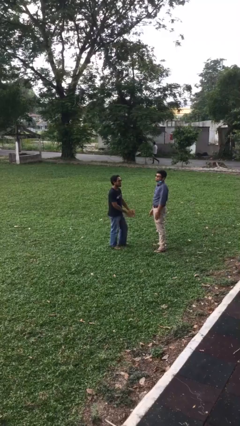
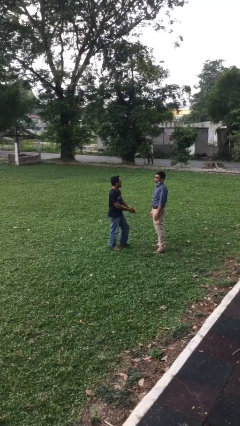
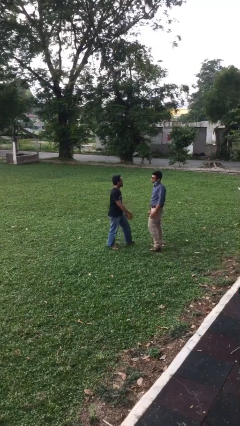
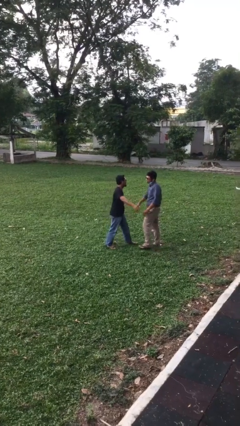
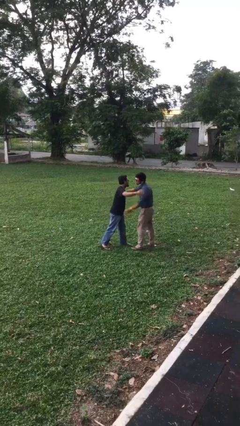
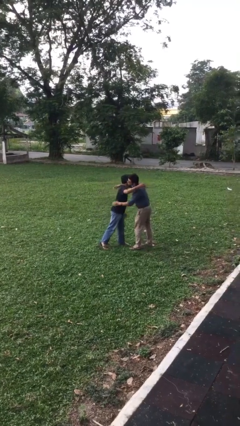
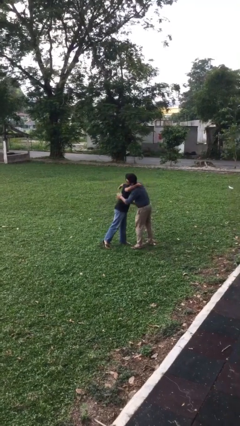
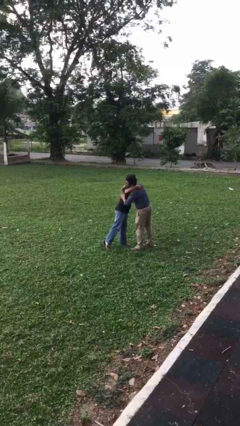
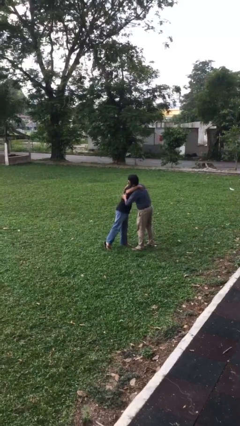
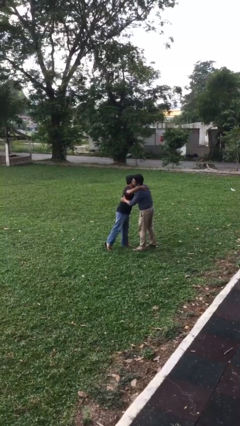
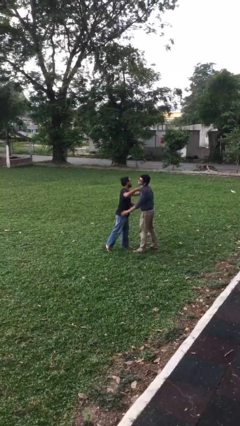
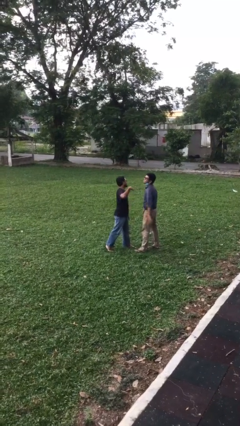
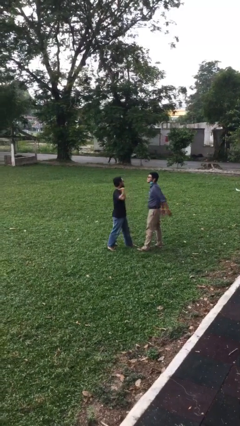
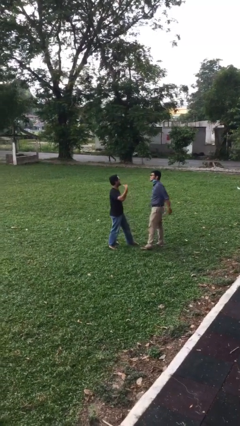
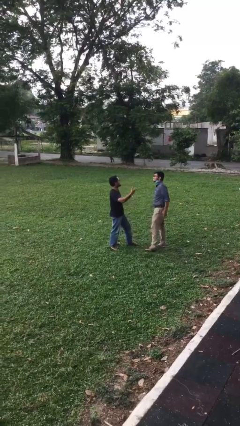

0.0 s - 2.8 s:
person embraces person

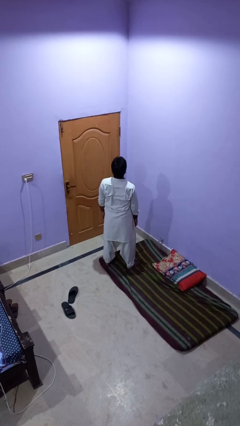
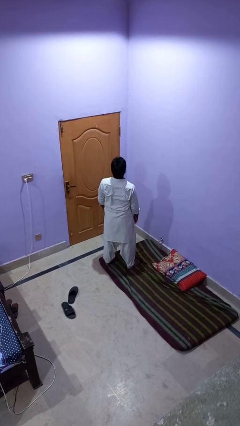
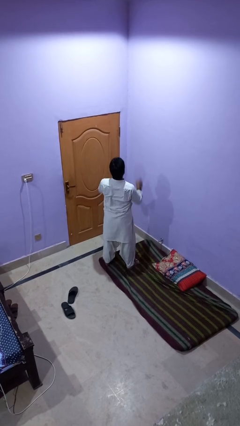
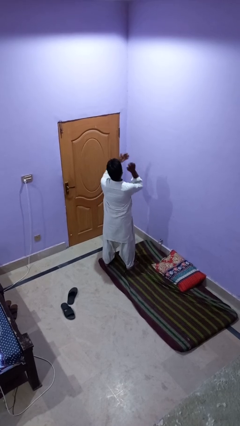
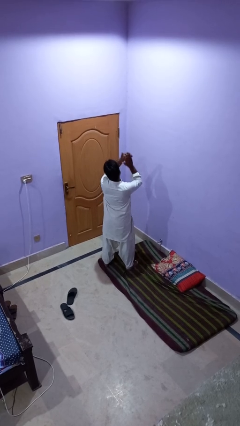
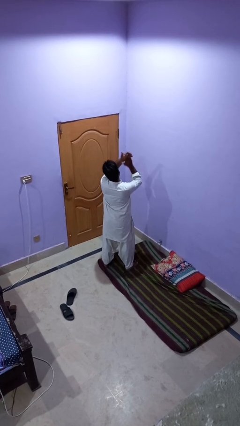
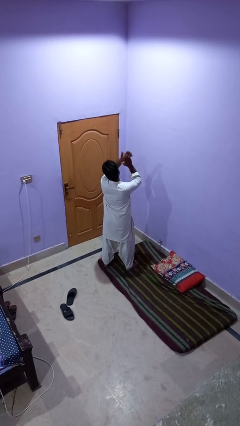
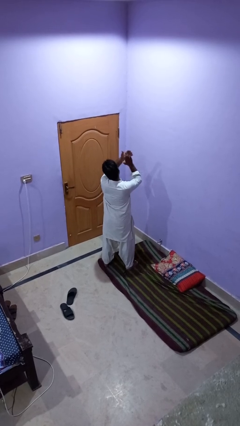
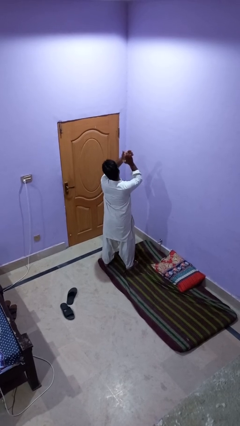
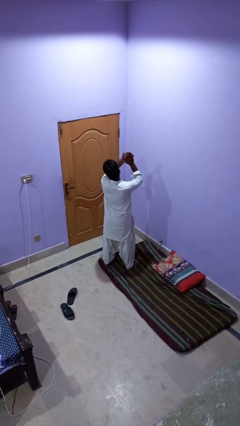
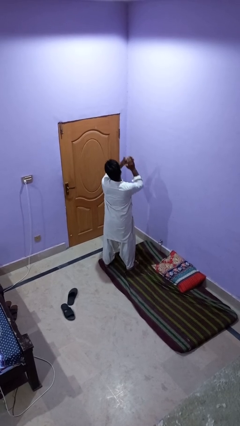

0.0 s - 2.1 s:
person claps hands

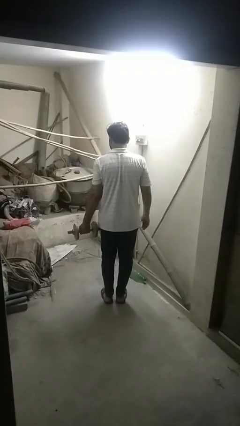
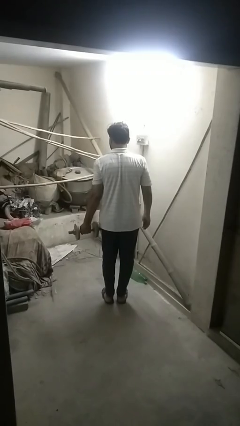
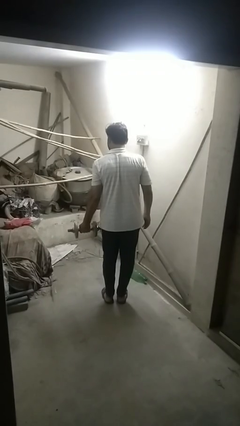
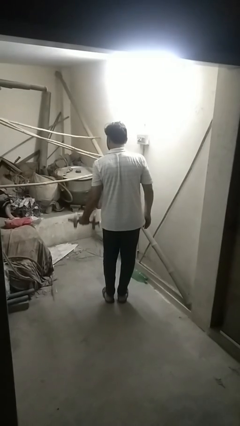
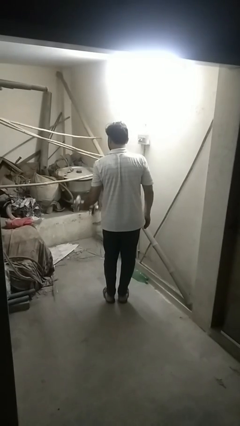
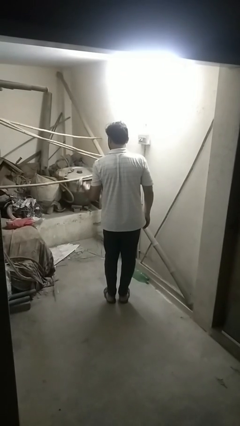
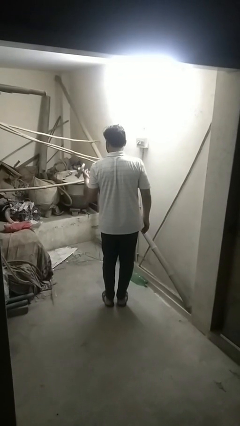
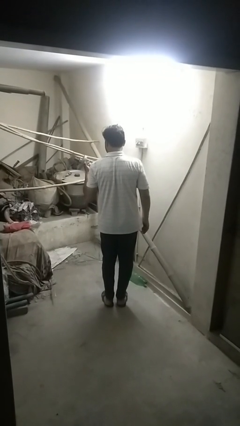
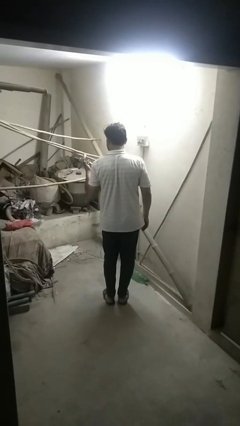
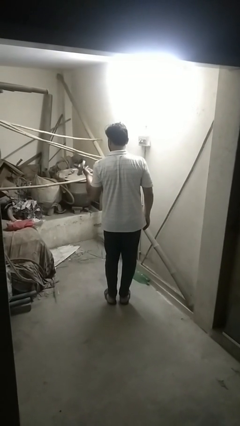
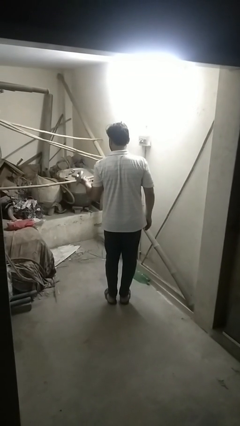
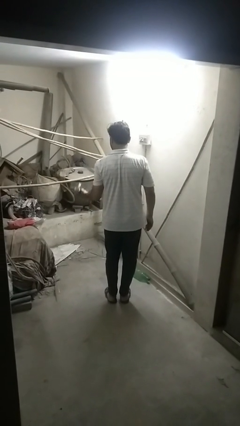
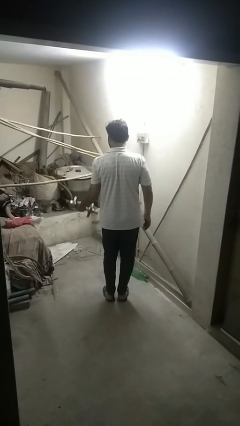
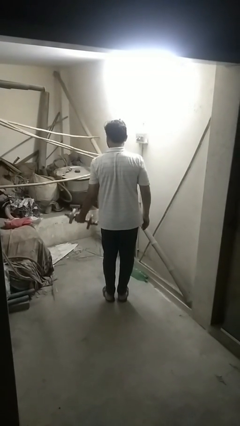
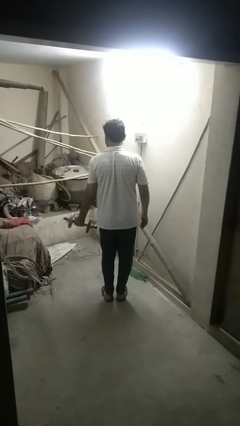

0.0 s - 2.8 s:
person lifts dumbbells

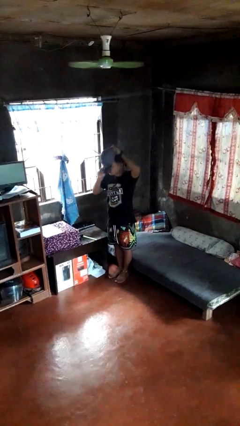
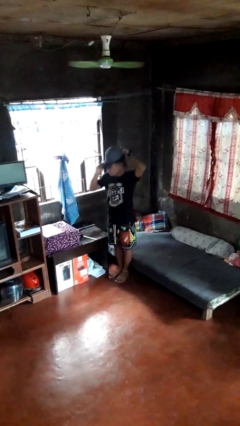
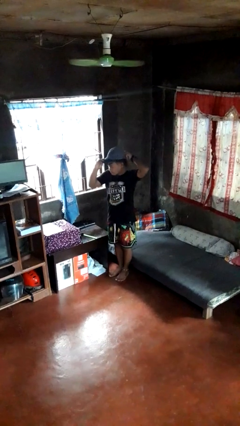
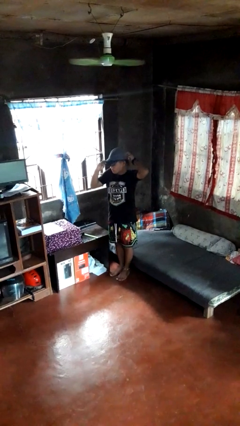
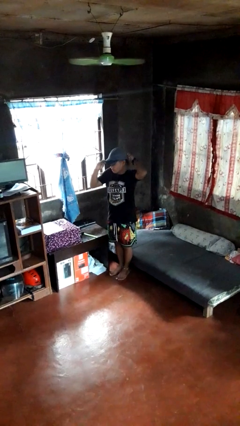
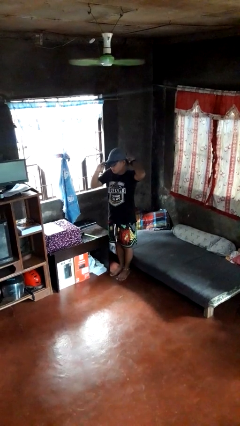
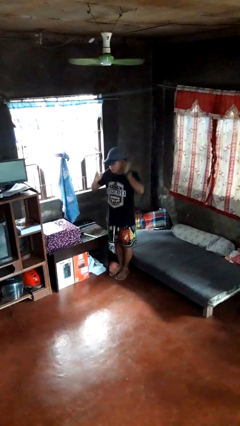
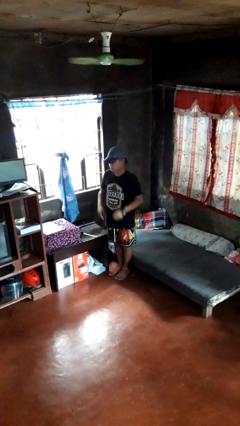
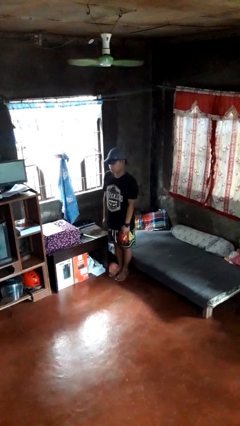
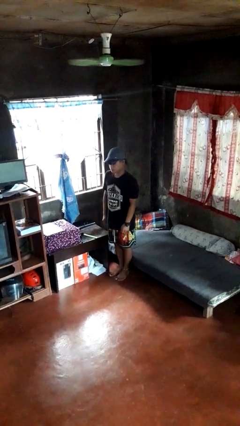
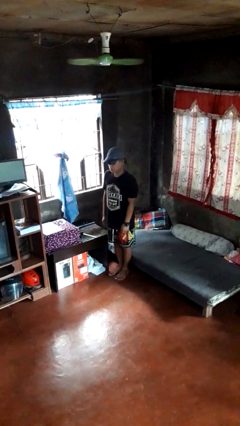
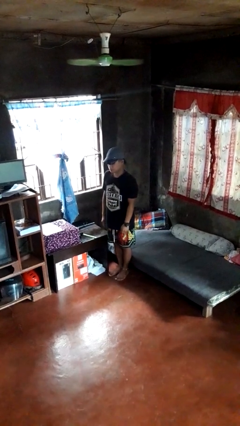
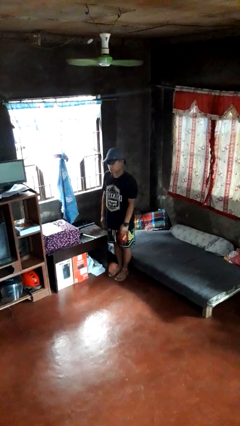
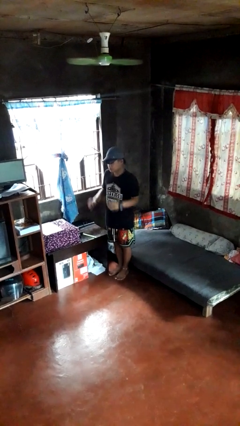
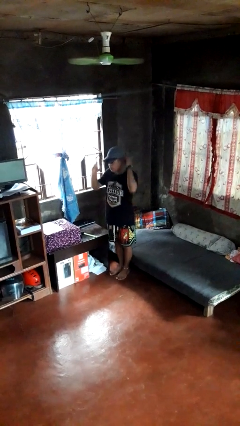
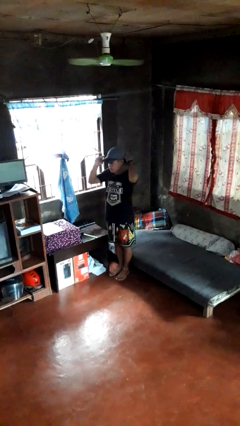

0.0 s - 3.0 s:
person puts on hat

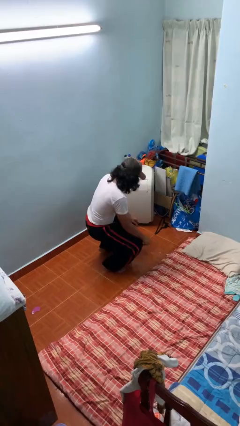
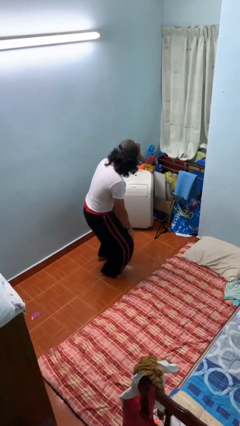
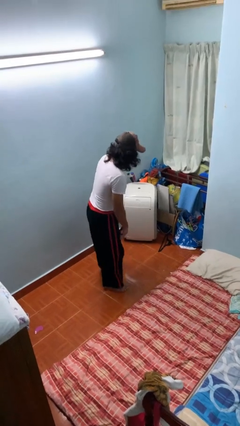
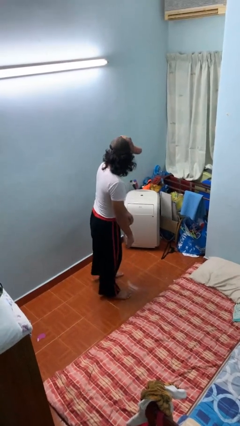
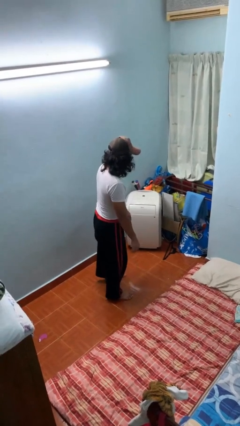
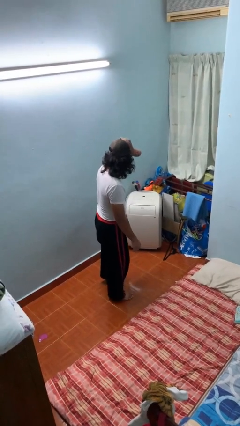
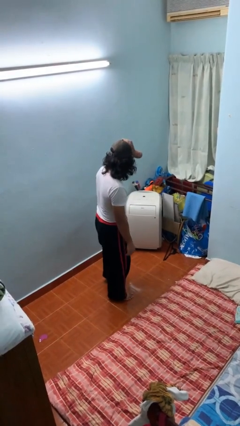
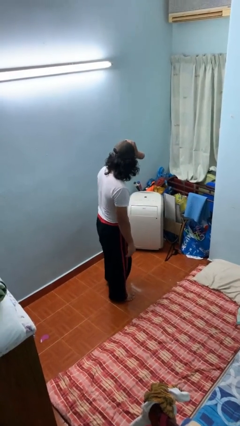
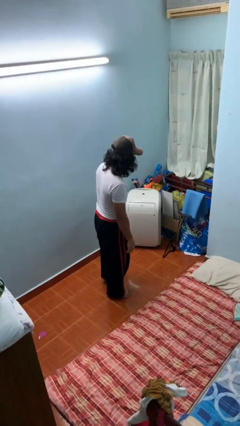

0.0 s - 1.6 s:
person stands up

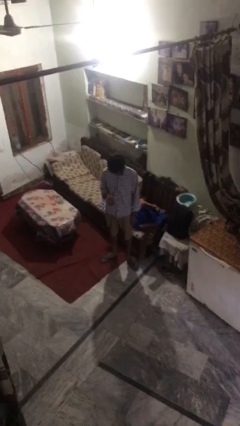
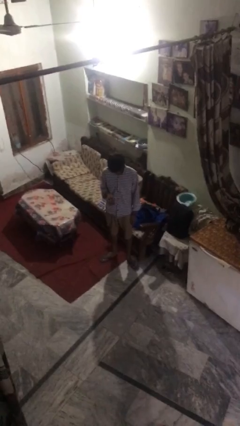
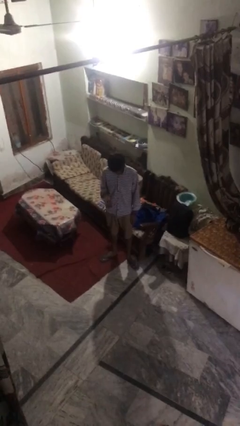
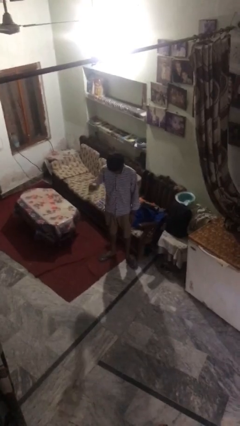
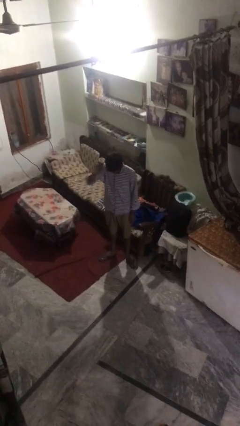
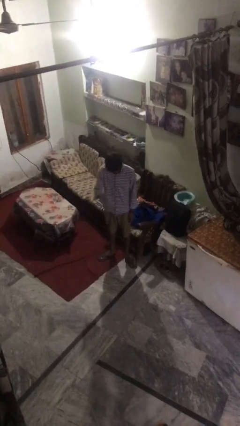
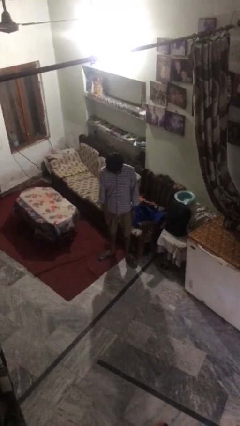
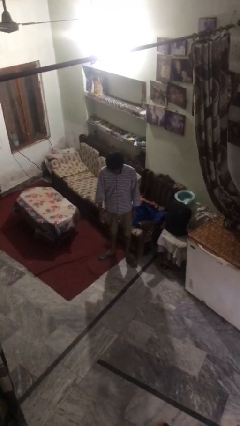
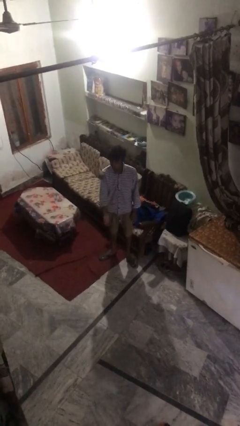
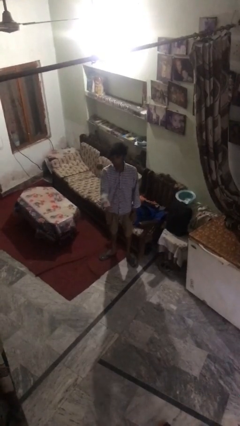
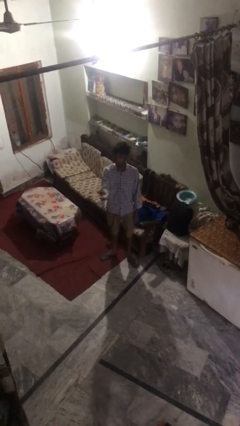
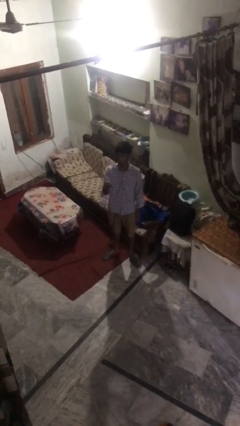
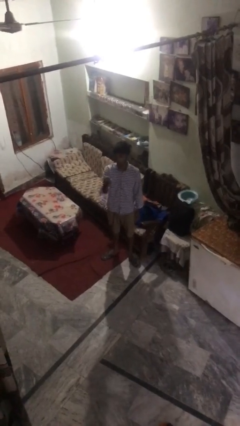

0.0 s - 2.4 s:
person bounces ball on floor

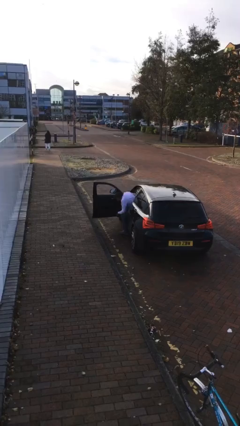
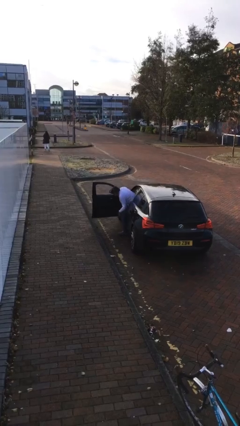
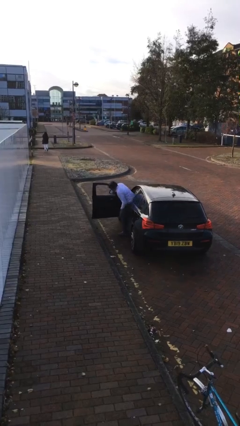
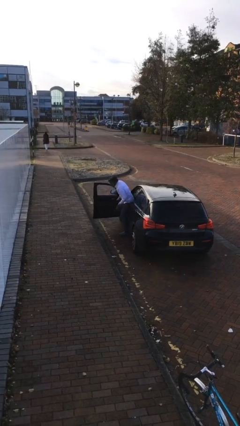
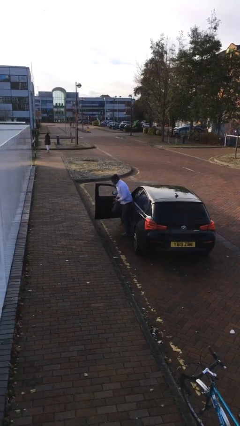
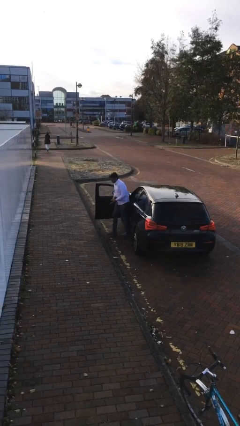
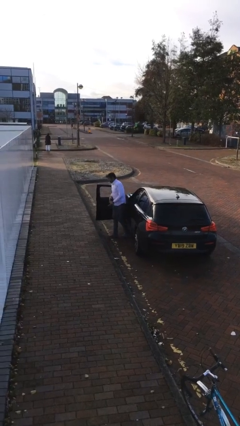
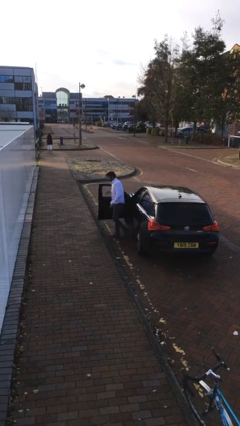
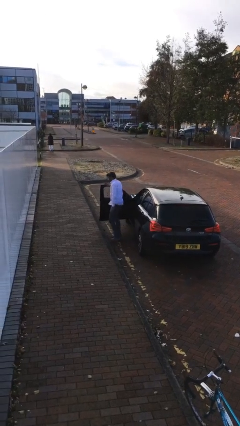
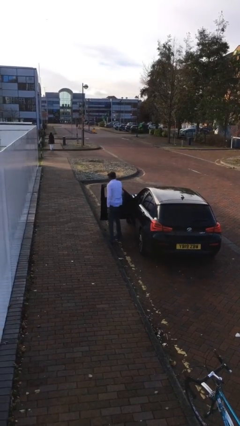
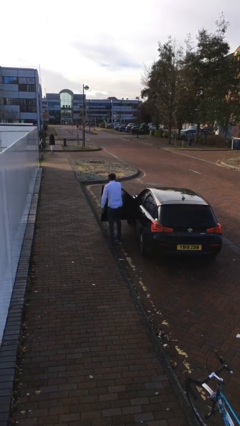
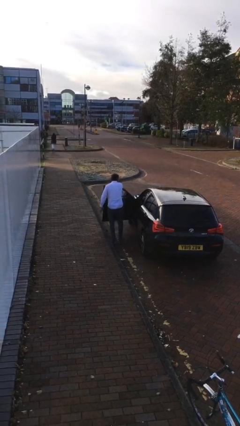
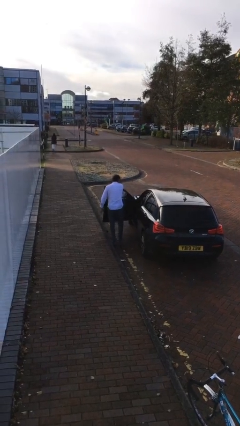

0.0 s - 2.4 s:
person exits car
